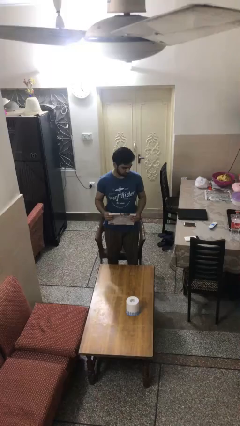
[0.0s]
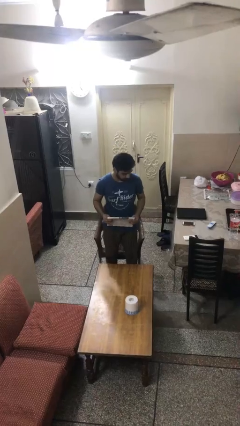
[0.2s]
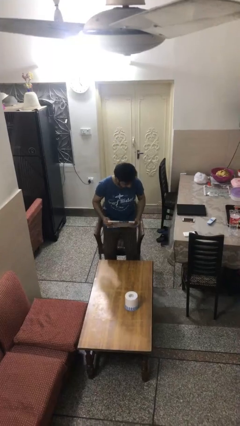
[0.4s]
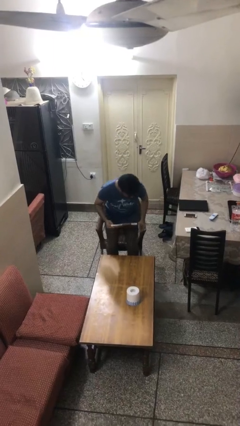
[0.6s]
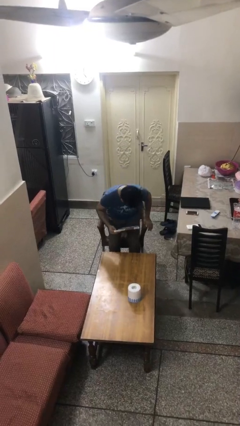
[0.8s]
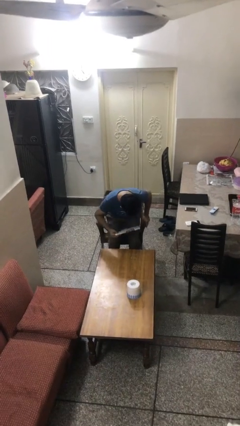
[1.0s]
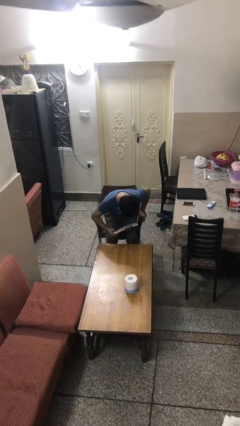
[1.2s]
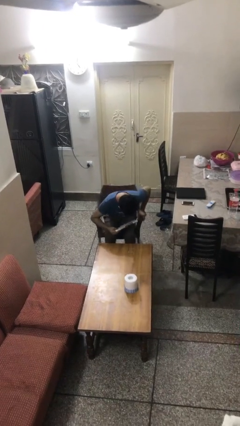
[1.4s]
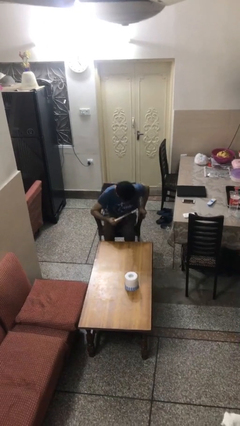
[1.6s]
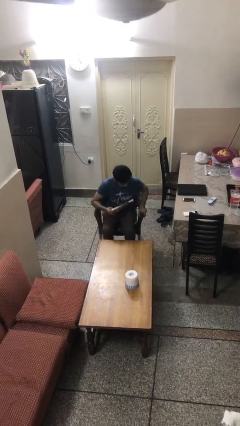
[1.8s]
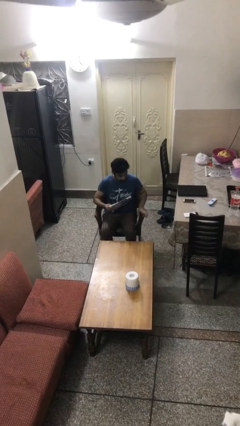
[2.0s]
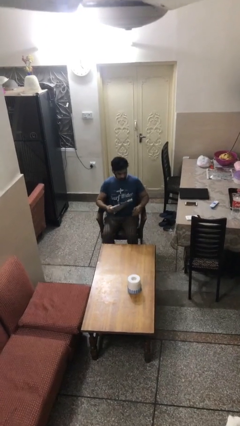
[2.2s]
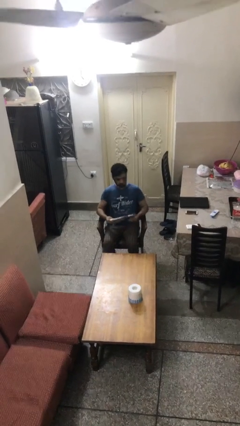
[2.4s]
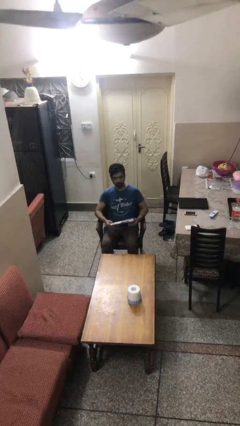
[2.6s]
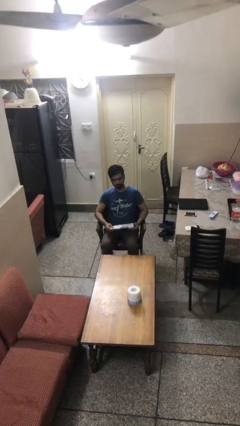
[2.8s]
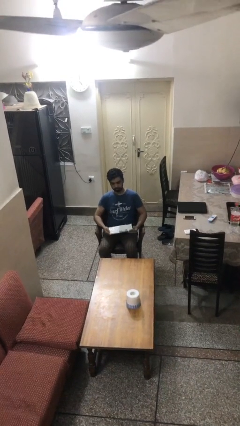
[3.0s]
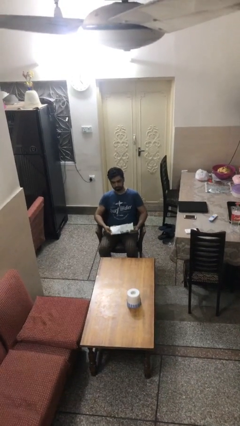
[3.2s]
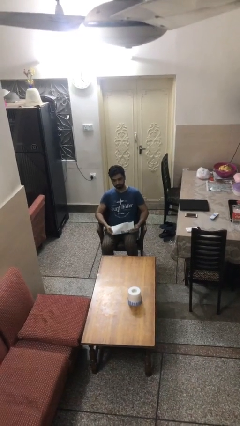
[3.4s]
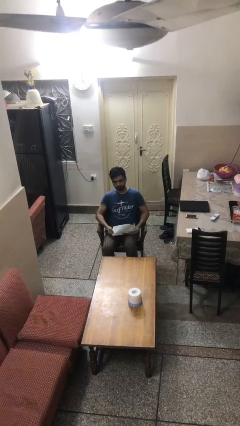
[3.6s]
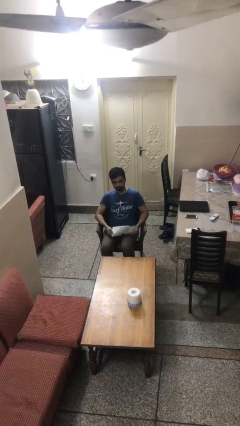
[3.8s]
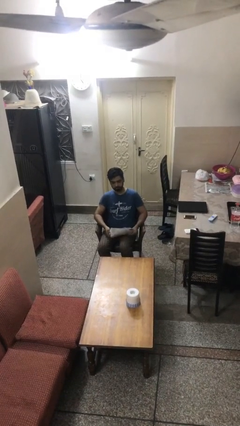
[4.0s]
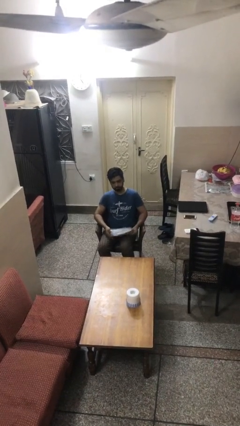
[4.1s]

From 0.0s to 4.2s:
person sits down

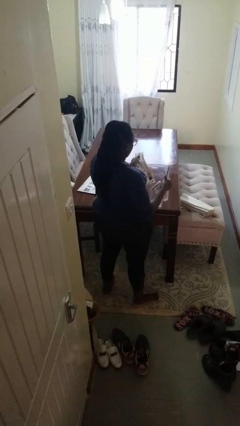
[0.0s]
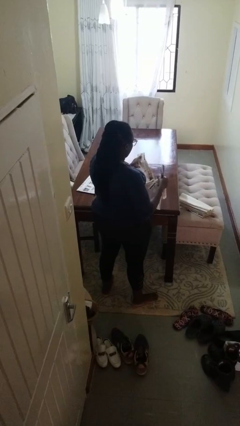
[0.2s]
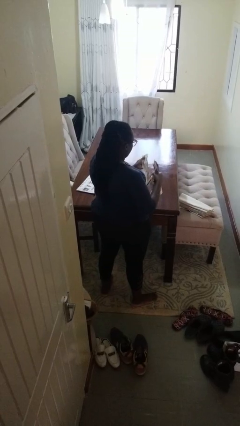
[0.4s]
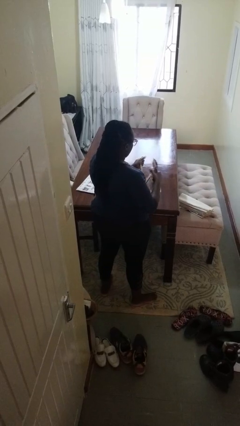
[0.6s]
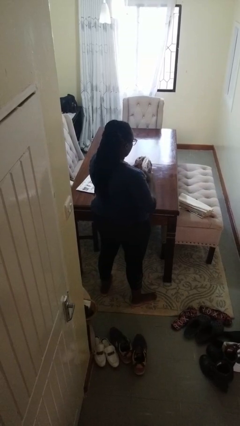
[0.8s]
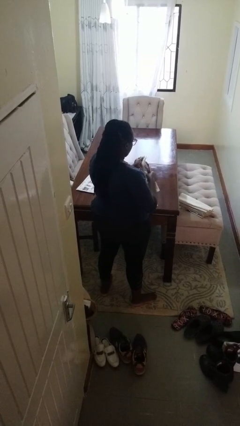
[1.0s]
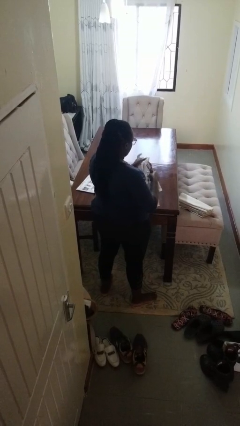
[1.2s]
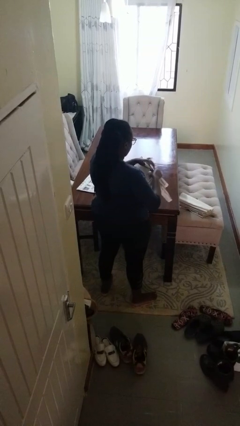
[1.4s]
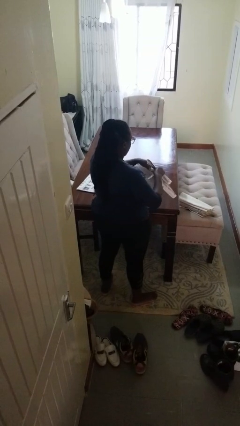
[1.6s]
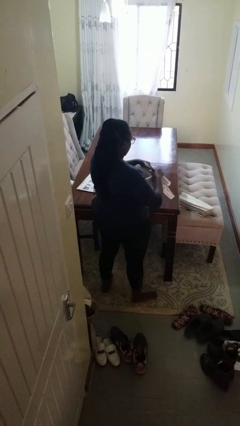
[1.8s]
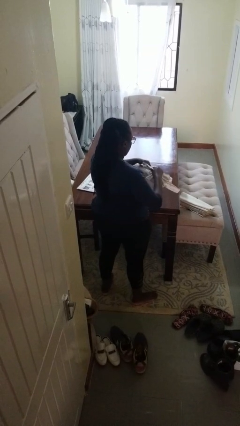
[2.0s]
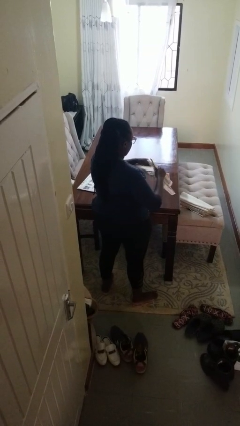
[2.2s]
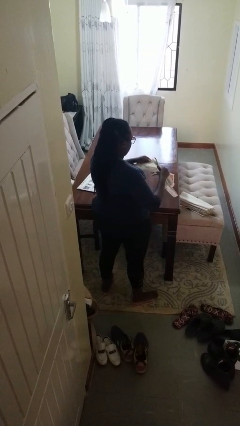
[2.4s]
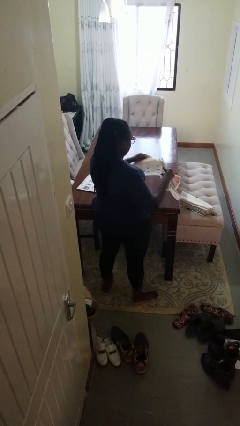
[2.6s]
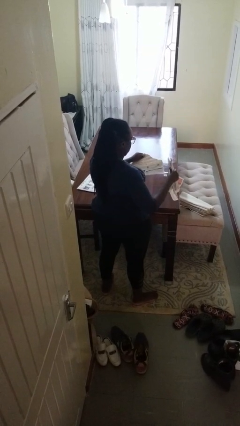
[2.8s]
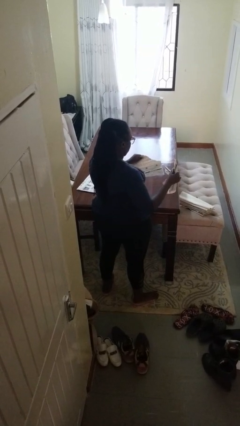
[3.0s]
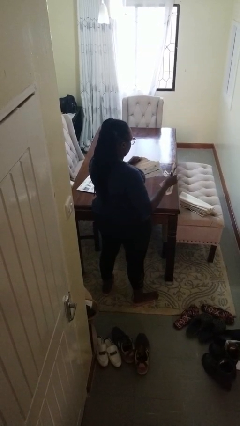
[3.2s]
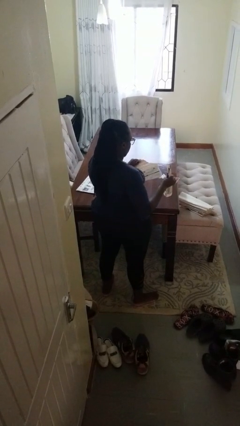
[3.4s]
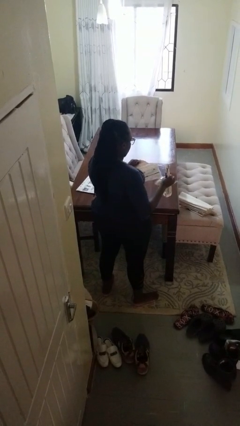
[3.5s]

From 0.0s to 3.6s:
person tears paper

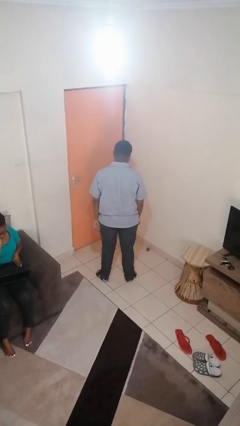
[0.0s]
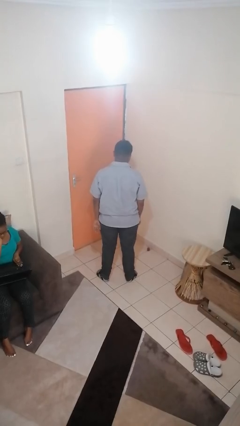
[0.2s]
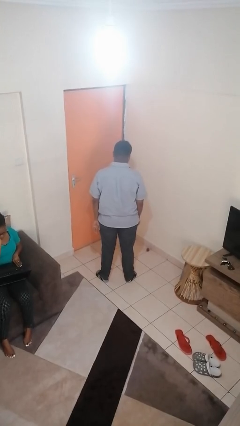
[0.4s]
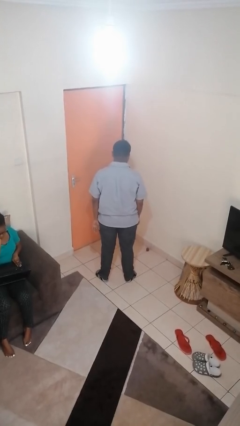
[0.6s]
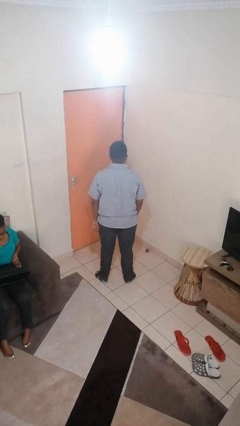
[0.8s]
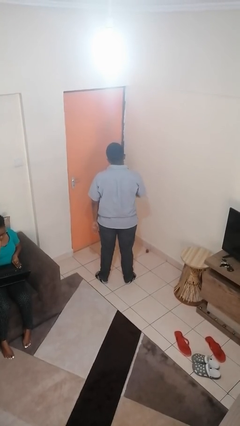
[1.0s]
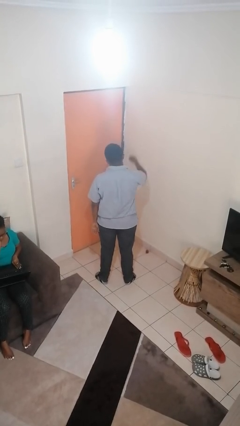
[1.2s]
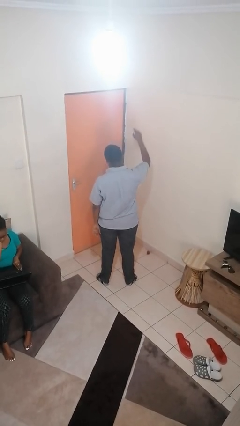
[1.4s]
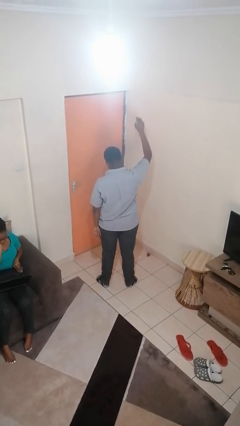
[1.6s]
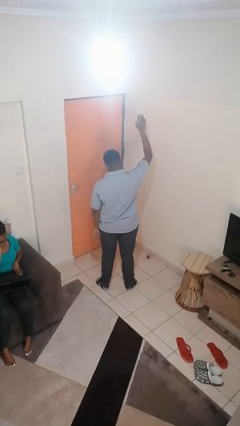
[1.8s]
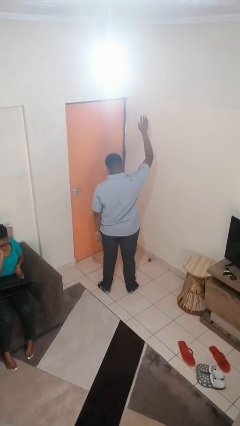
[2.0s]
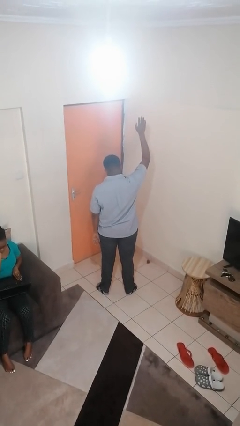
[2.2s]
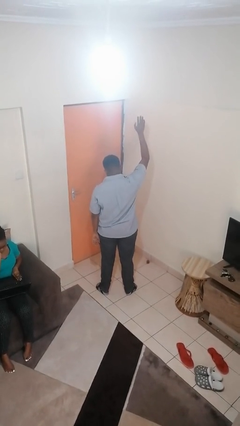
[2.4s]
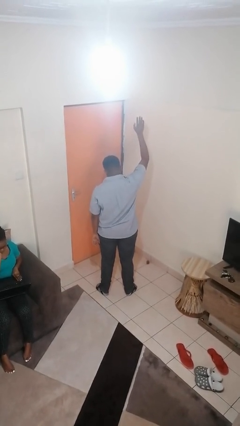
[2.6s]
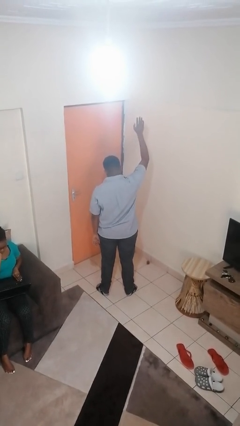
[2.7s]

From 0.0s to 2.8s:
person gestures raise hand

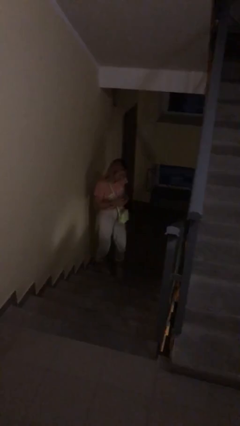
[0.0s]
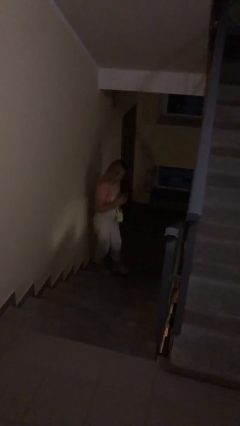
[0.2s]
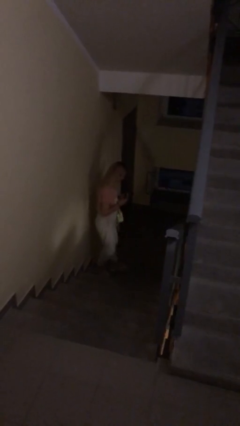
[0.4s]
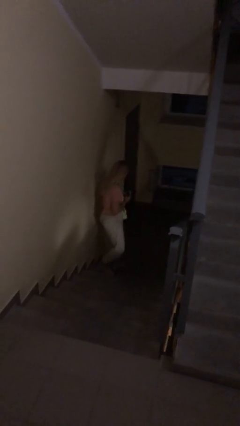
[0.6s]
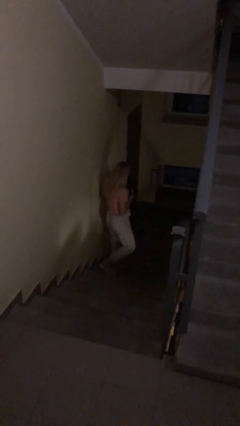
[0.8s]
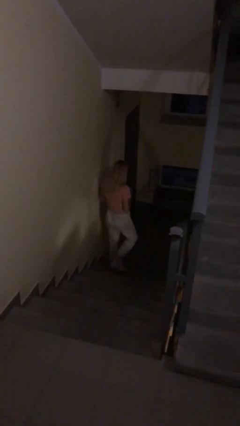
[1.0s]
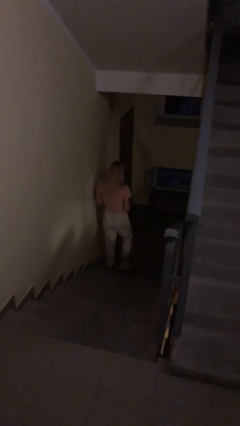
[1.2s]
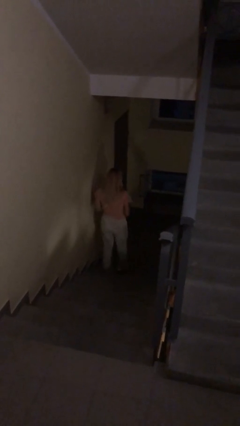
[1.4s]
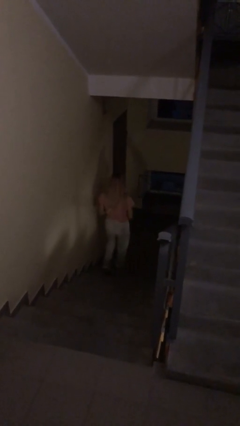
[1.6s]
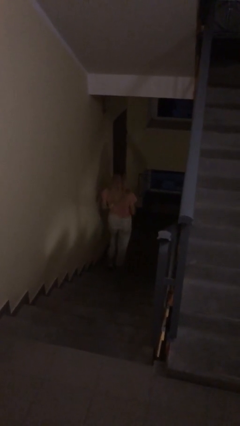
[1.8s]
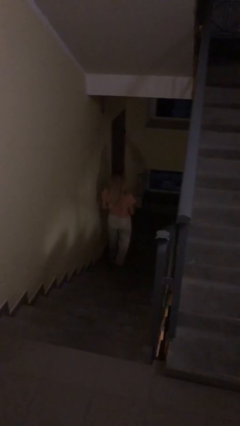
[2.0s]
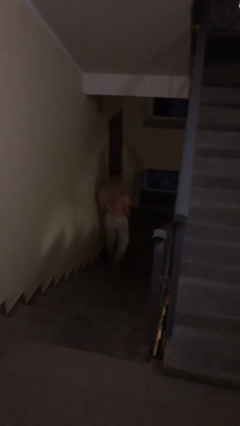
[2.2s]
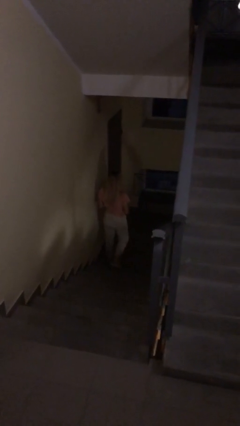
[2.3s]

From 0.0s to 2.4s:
person climbs down stairs

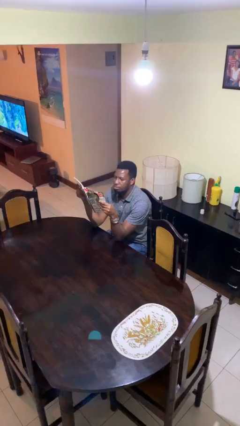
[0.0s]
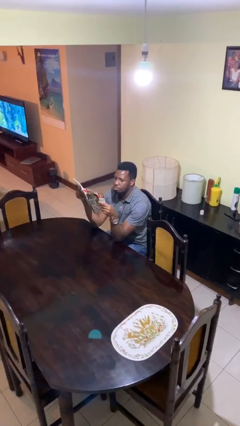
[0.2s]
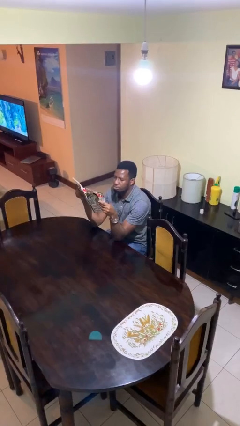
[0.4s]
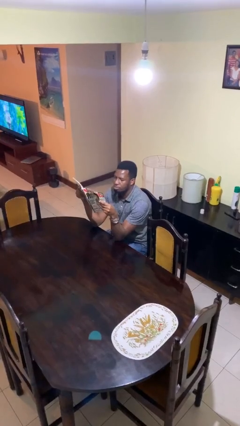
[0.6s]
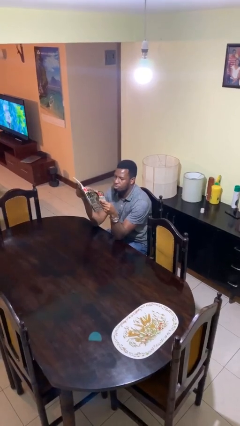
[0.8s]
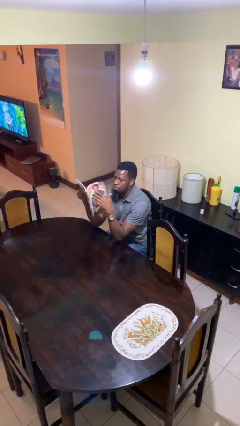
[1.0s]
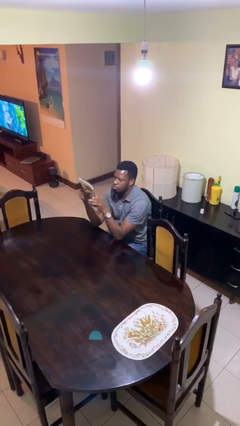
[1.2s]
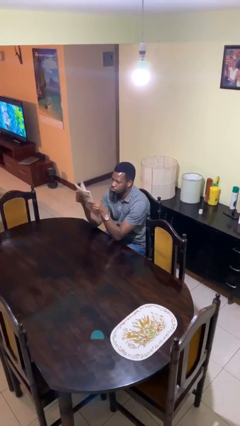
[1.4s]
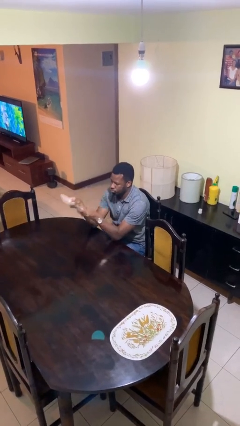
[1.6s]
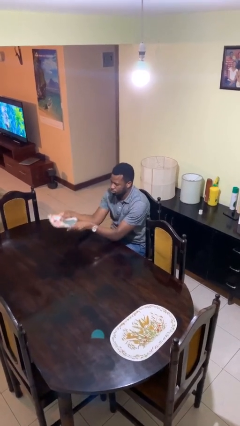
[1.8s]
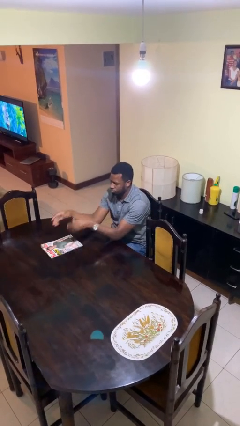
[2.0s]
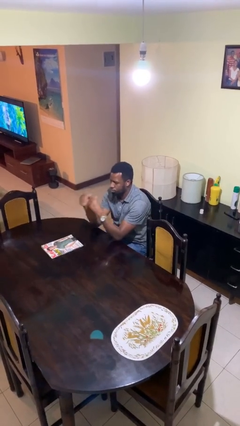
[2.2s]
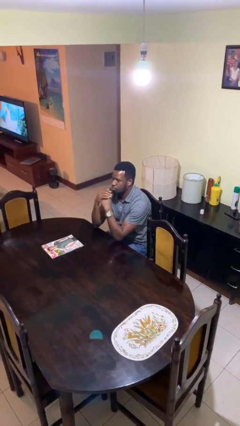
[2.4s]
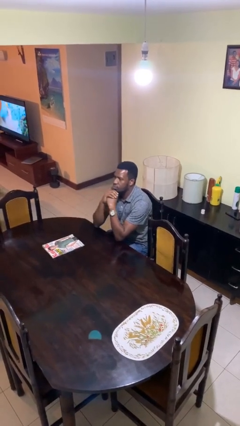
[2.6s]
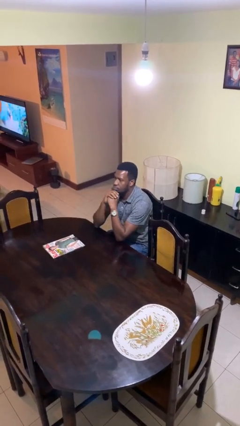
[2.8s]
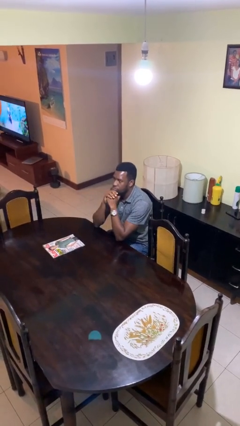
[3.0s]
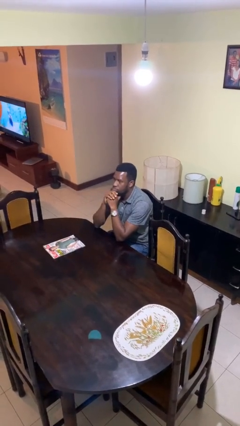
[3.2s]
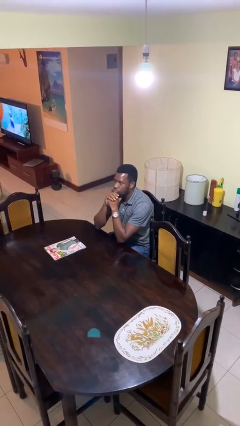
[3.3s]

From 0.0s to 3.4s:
person puts down object on table

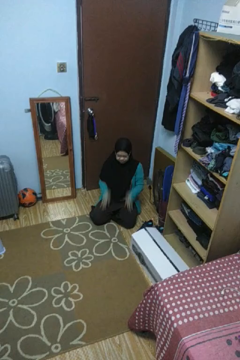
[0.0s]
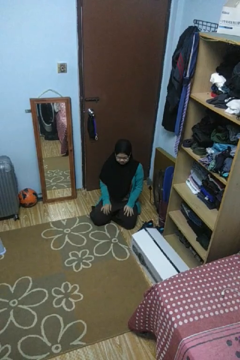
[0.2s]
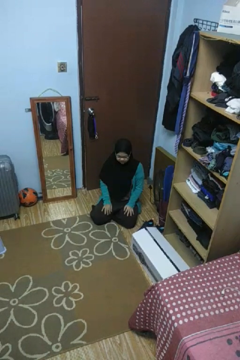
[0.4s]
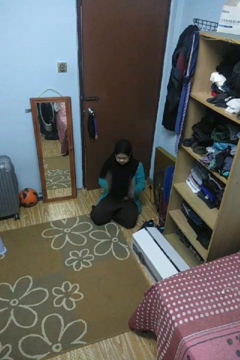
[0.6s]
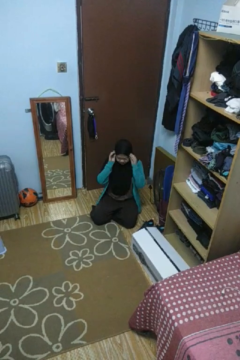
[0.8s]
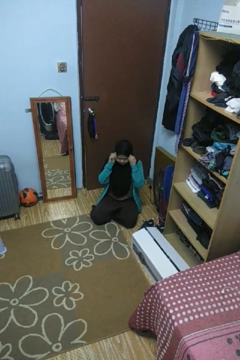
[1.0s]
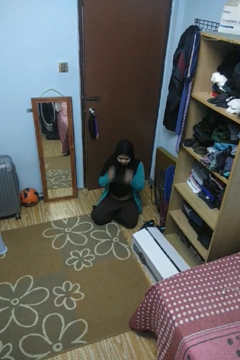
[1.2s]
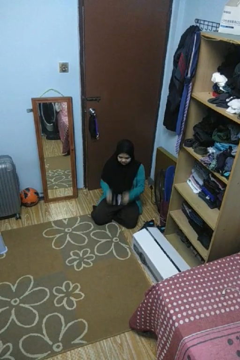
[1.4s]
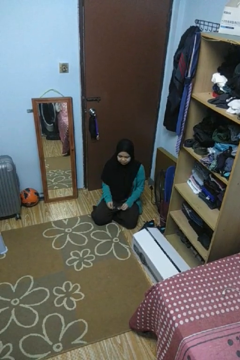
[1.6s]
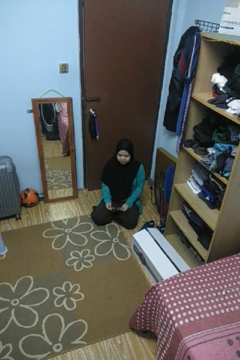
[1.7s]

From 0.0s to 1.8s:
person takes off glasses
